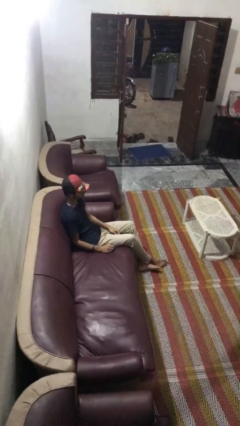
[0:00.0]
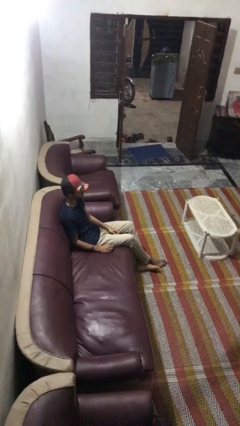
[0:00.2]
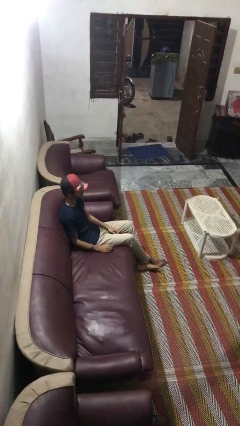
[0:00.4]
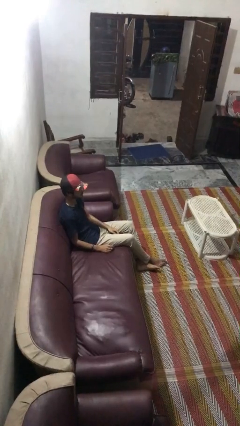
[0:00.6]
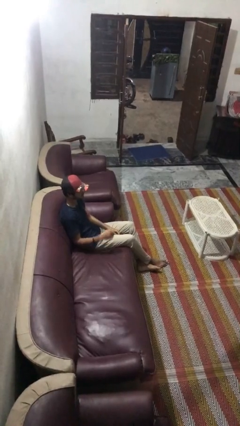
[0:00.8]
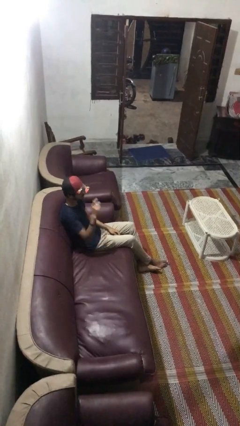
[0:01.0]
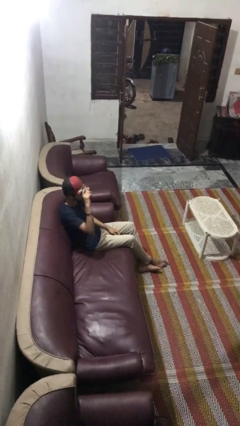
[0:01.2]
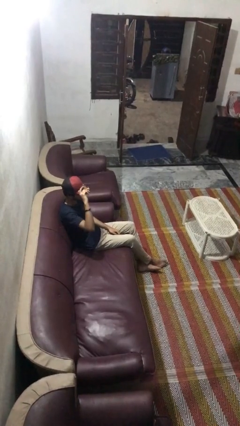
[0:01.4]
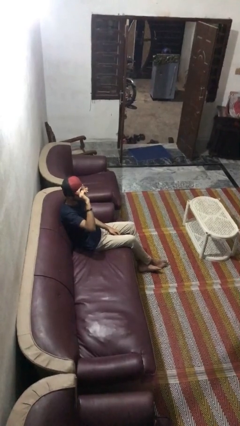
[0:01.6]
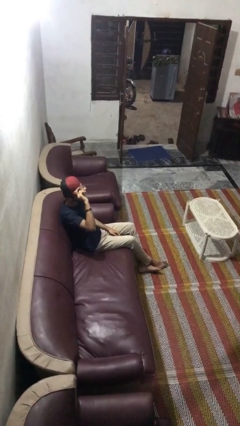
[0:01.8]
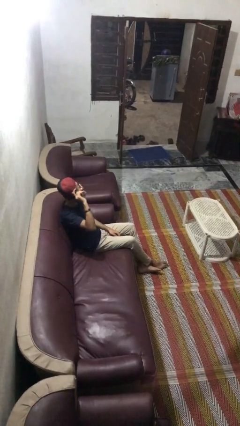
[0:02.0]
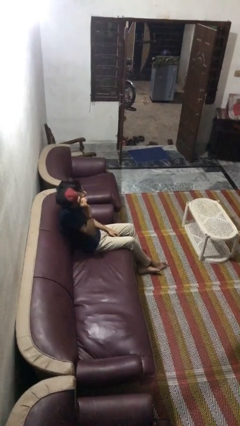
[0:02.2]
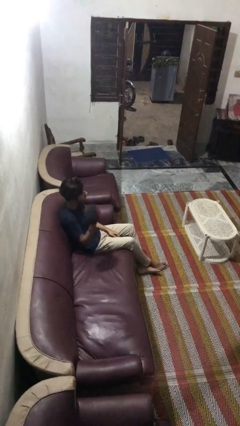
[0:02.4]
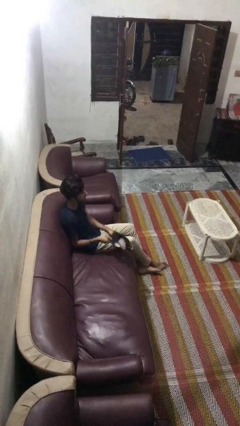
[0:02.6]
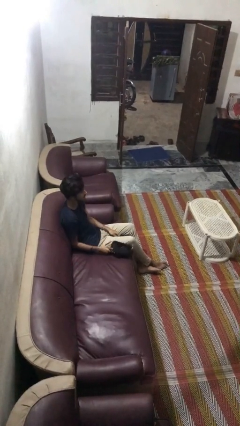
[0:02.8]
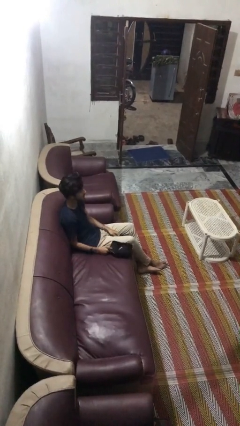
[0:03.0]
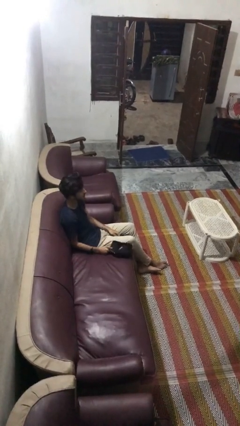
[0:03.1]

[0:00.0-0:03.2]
person takes off hat

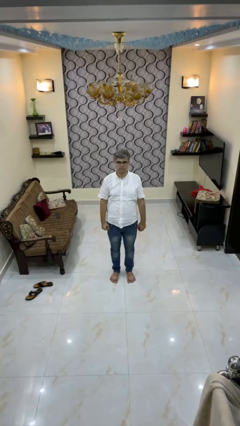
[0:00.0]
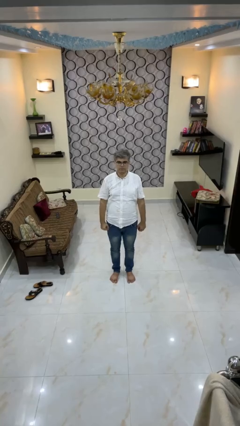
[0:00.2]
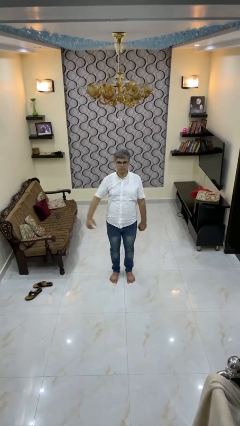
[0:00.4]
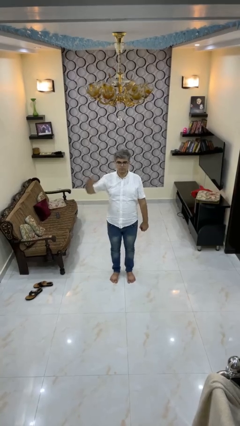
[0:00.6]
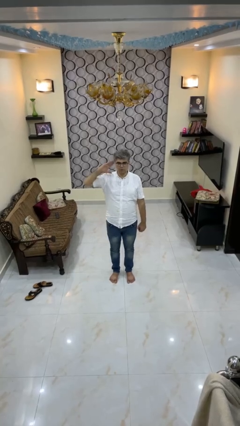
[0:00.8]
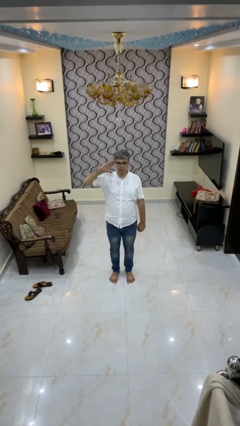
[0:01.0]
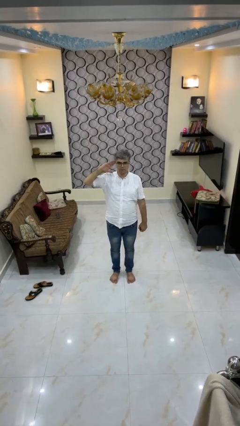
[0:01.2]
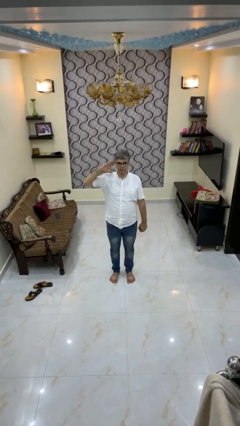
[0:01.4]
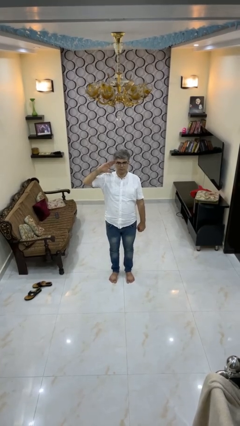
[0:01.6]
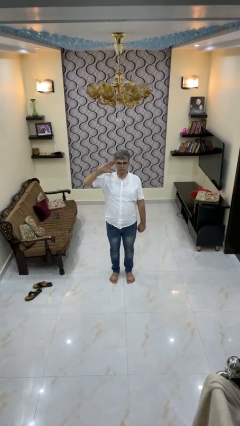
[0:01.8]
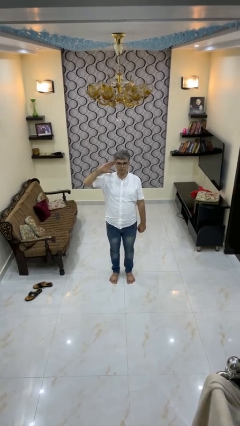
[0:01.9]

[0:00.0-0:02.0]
person salutes

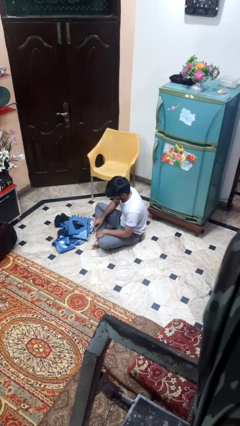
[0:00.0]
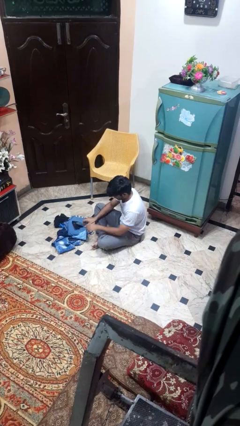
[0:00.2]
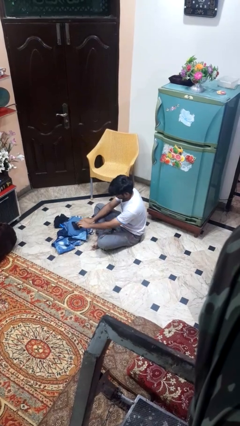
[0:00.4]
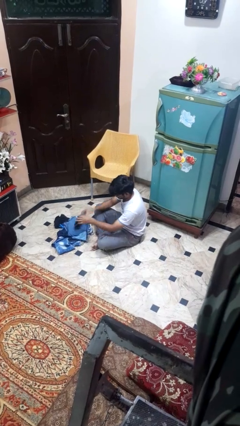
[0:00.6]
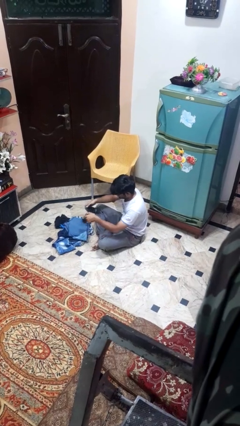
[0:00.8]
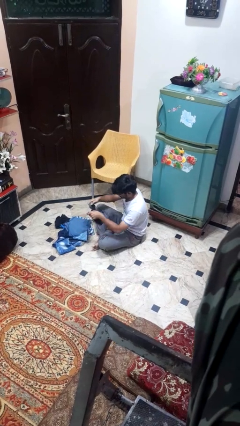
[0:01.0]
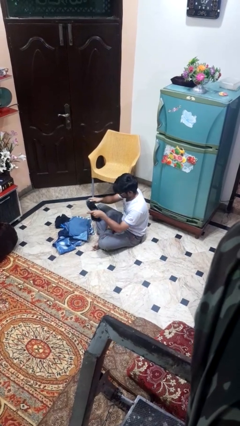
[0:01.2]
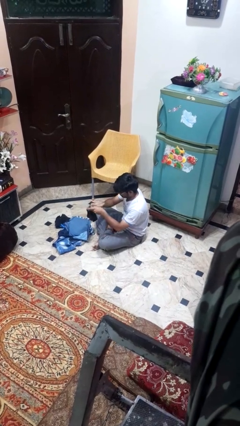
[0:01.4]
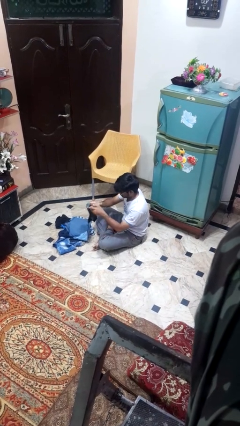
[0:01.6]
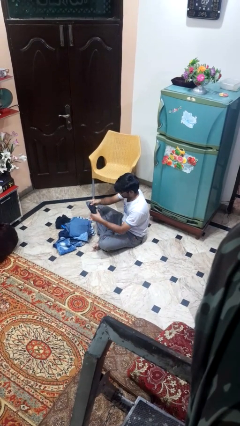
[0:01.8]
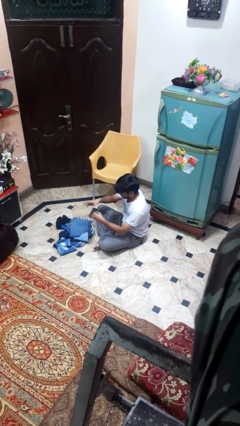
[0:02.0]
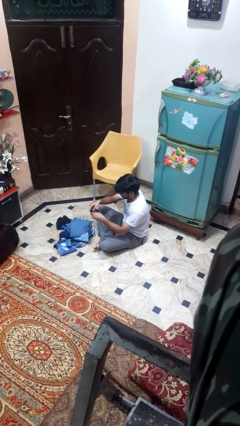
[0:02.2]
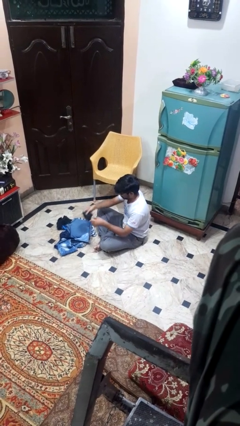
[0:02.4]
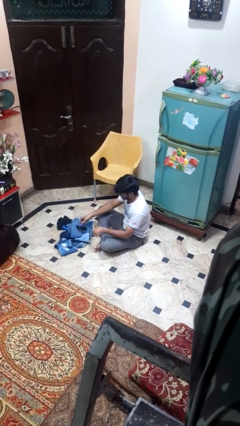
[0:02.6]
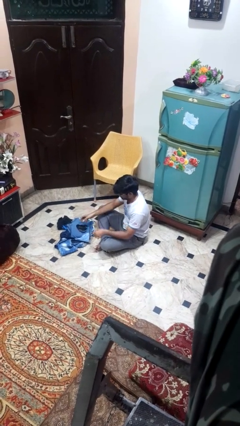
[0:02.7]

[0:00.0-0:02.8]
person folds socks

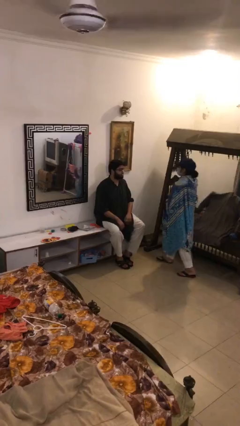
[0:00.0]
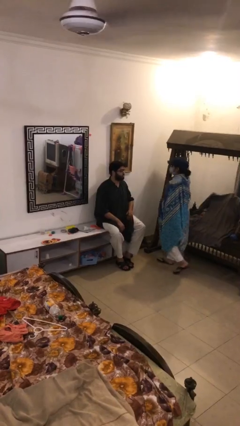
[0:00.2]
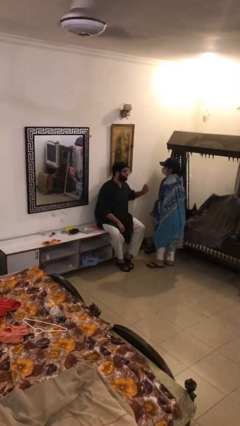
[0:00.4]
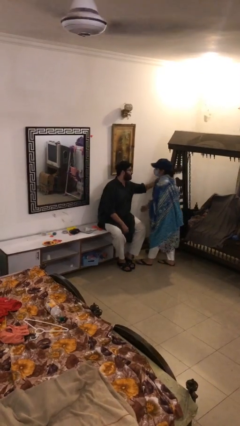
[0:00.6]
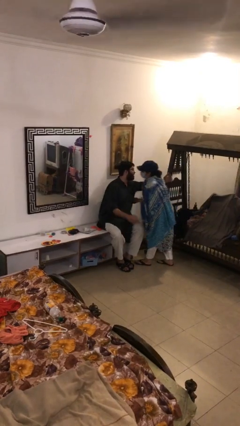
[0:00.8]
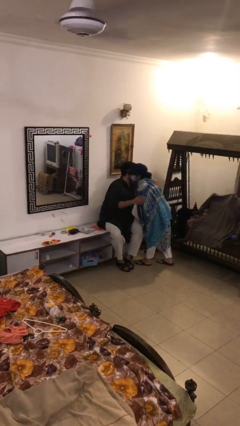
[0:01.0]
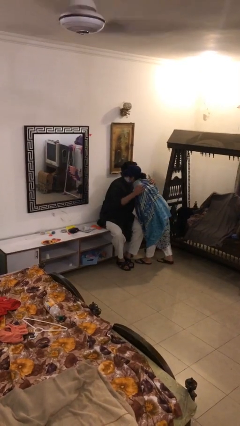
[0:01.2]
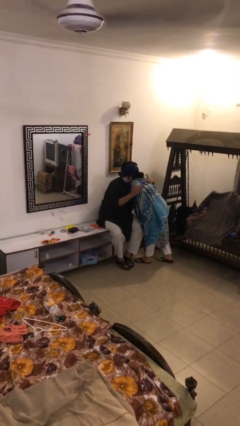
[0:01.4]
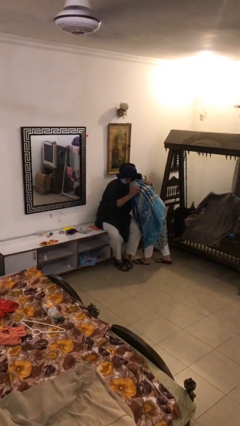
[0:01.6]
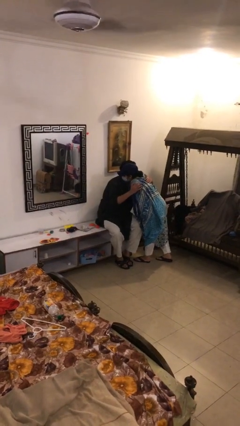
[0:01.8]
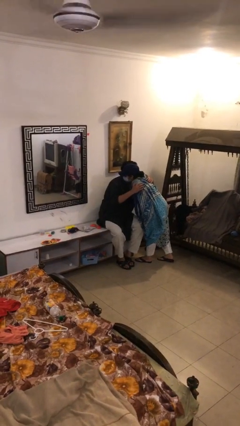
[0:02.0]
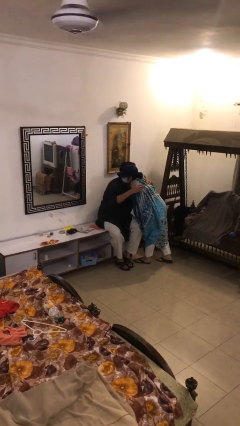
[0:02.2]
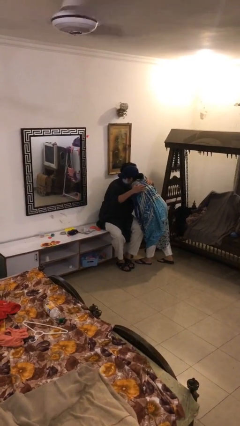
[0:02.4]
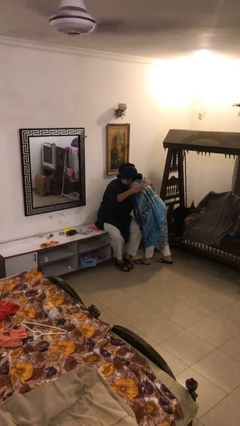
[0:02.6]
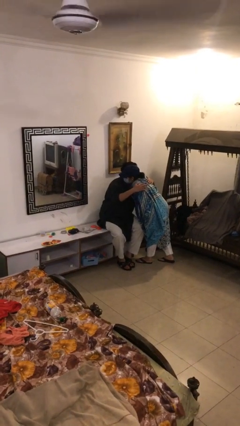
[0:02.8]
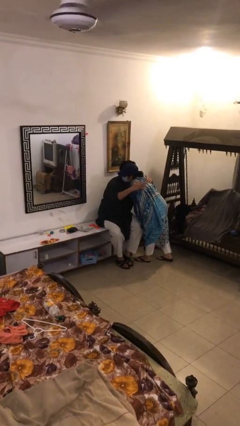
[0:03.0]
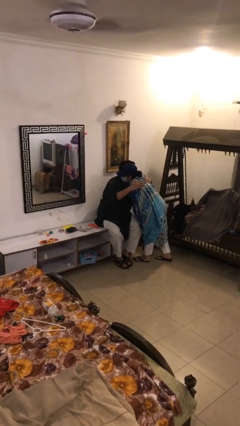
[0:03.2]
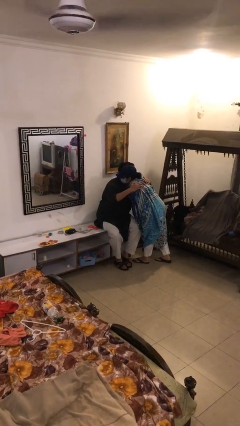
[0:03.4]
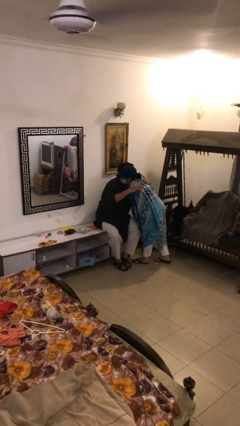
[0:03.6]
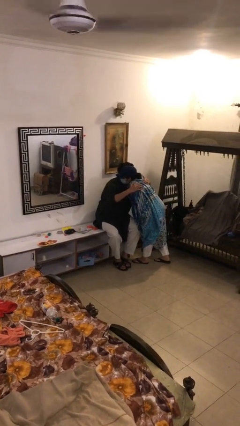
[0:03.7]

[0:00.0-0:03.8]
person embraces person

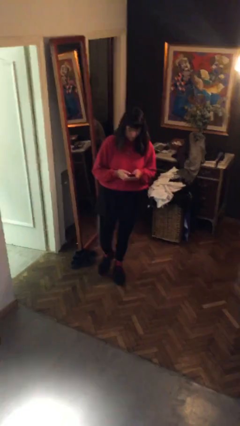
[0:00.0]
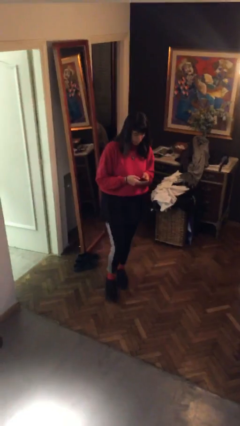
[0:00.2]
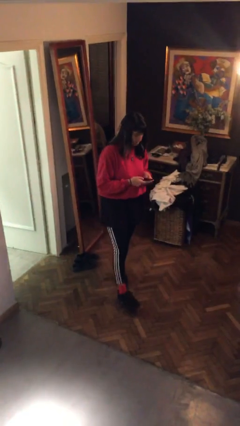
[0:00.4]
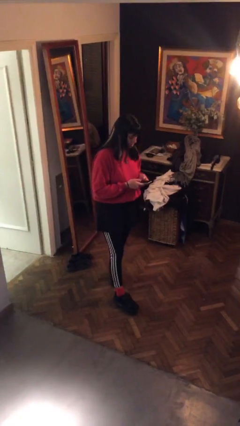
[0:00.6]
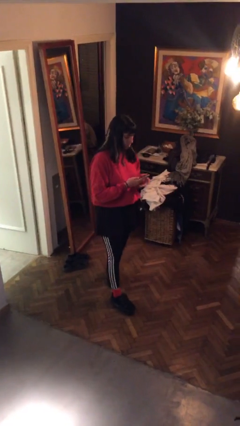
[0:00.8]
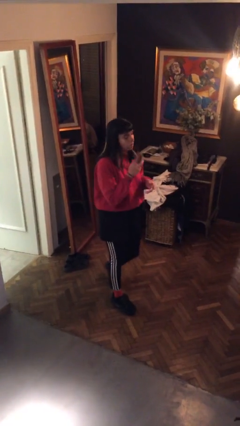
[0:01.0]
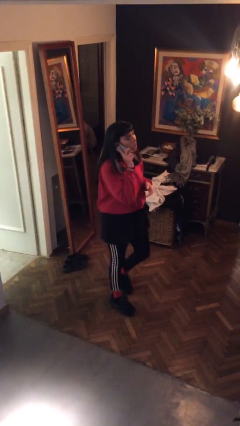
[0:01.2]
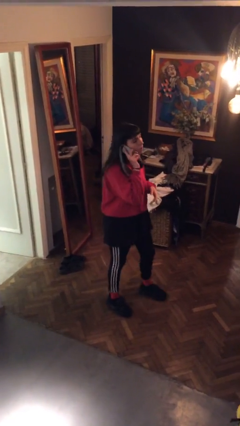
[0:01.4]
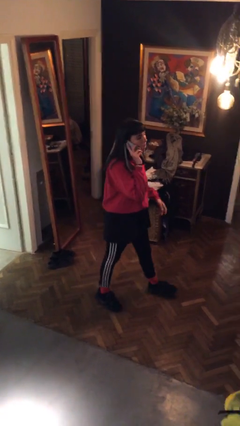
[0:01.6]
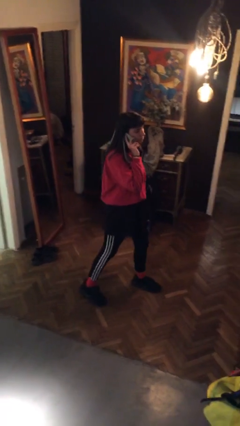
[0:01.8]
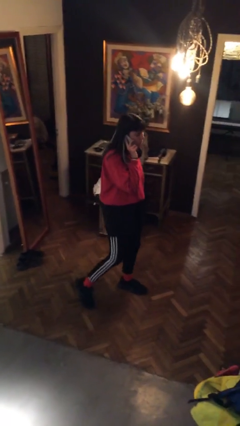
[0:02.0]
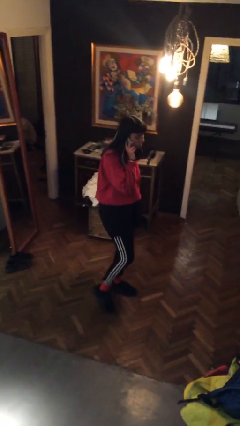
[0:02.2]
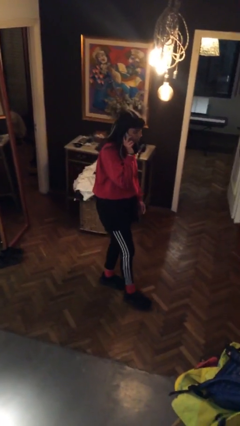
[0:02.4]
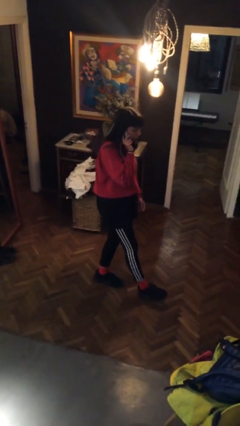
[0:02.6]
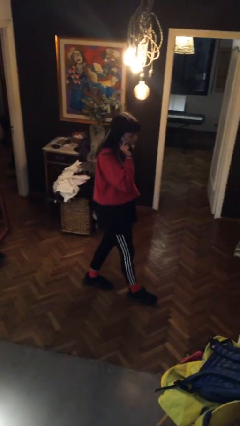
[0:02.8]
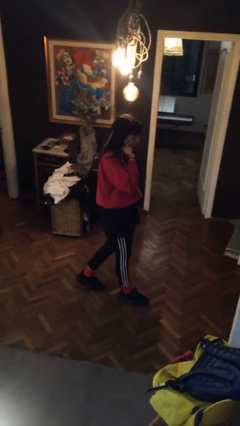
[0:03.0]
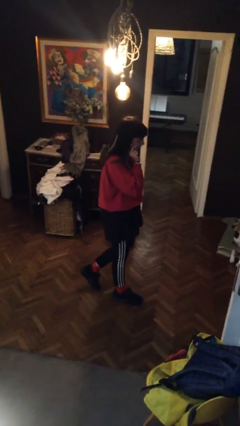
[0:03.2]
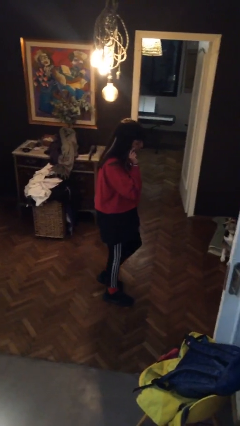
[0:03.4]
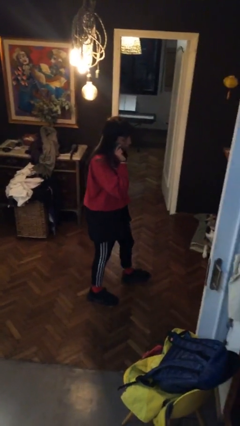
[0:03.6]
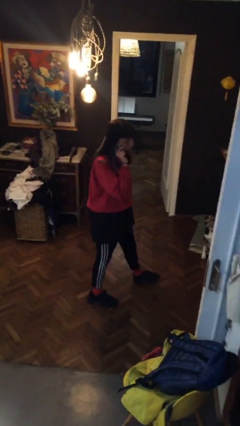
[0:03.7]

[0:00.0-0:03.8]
person talks on phone

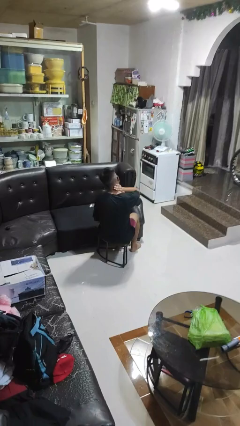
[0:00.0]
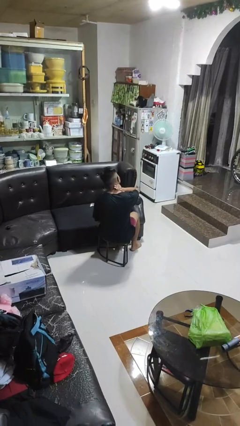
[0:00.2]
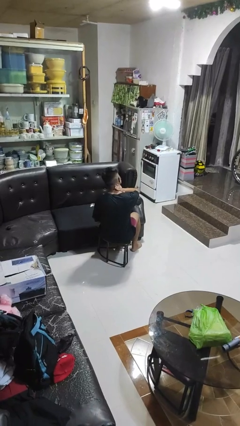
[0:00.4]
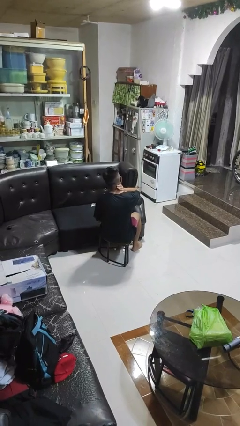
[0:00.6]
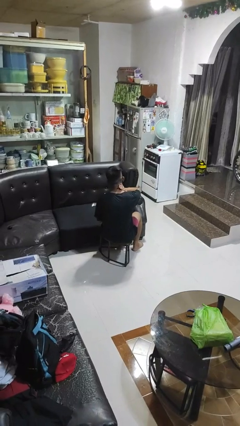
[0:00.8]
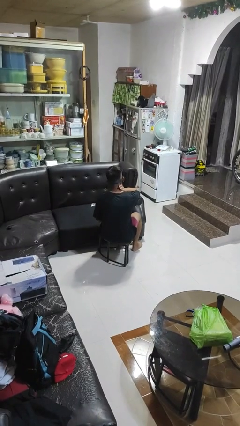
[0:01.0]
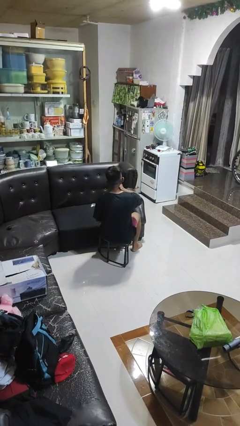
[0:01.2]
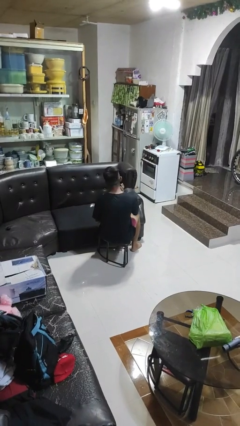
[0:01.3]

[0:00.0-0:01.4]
person swats bug

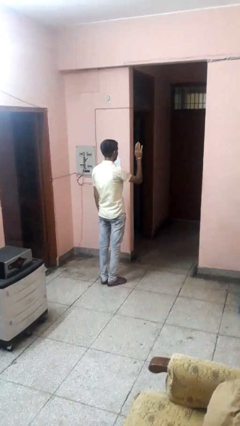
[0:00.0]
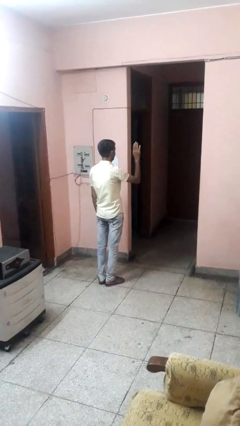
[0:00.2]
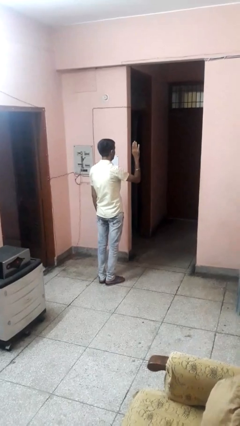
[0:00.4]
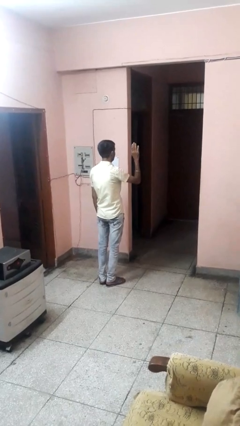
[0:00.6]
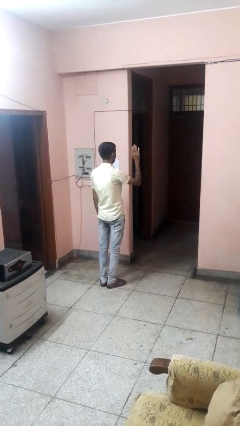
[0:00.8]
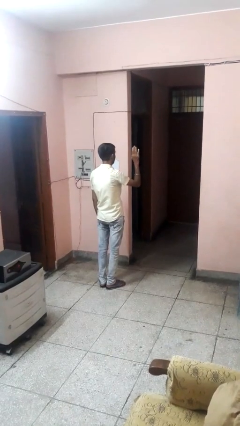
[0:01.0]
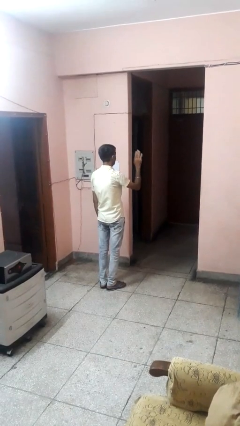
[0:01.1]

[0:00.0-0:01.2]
person gestures swipe up
